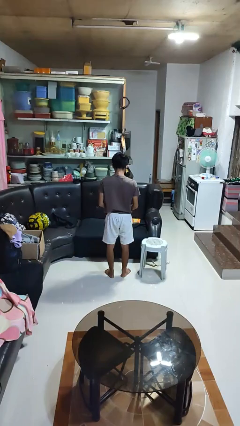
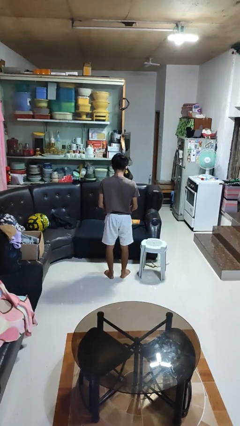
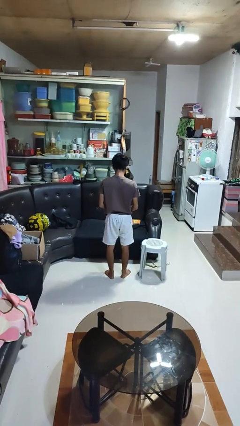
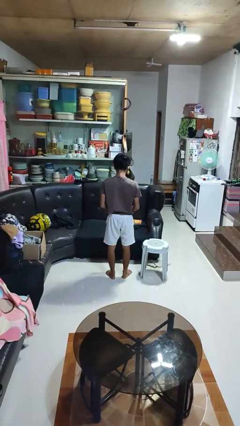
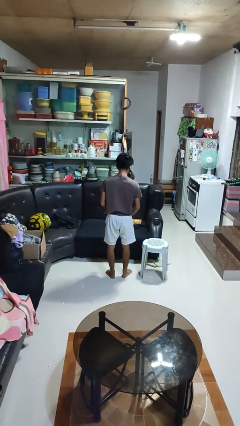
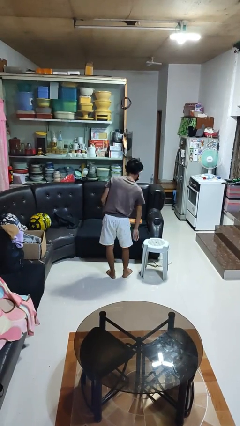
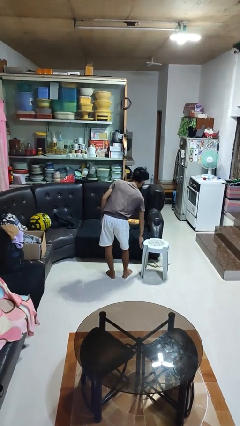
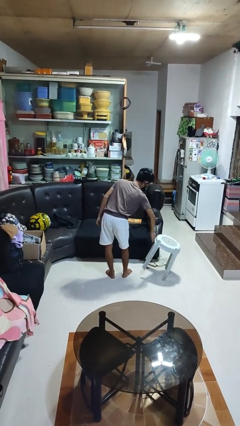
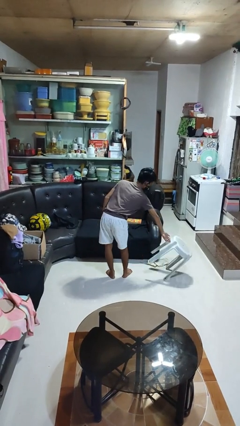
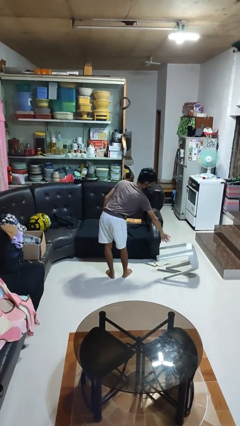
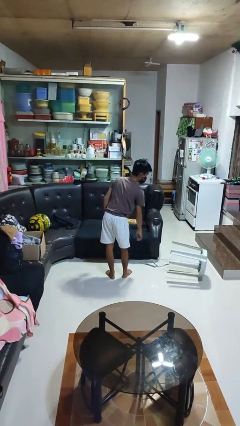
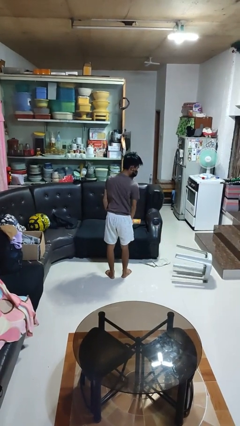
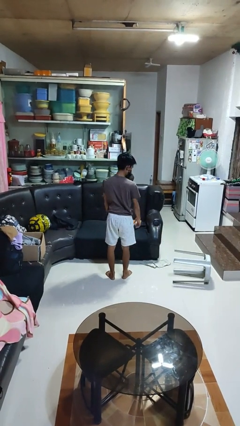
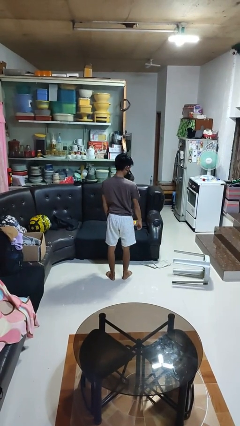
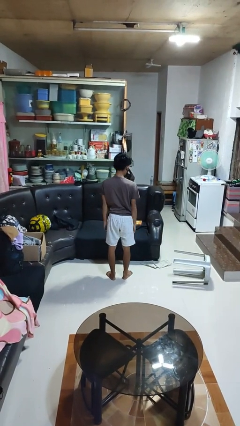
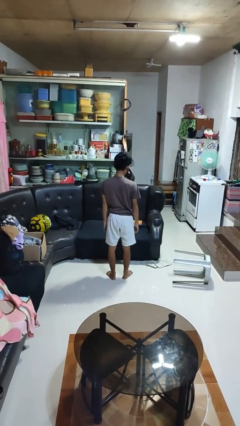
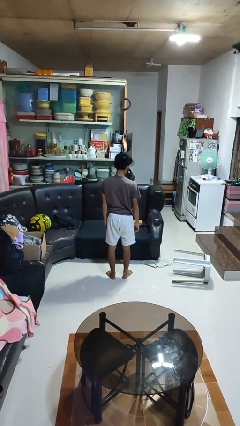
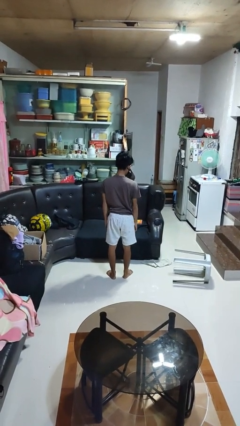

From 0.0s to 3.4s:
person knocks over furniture

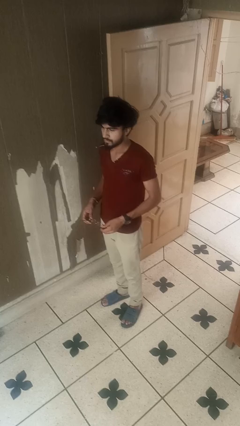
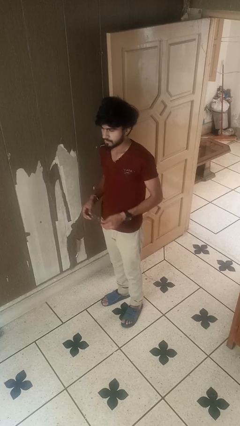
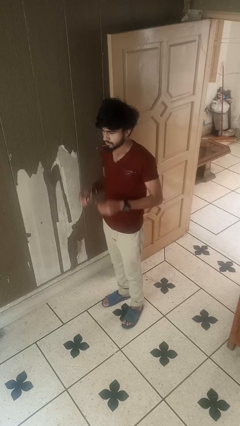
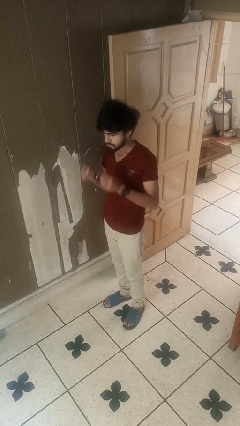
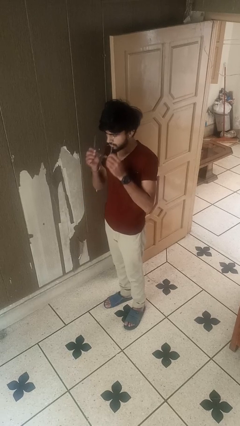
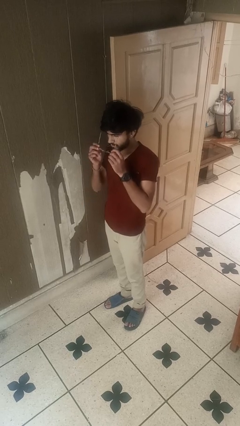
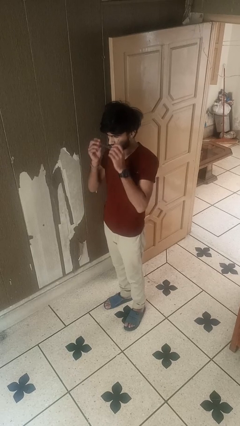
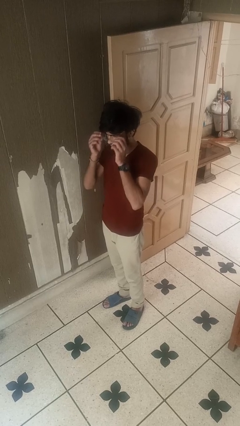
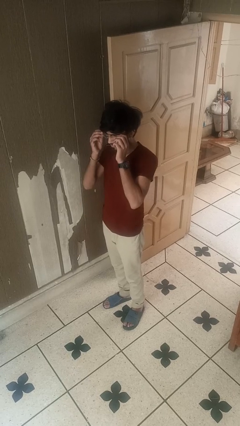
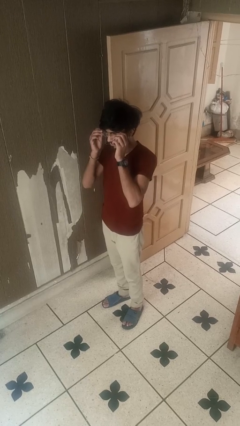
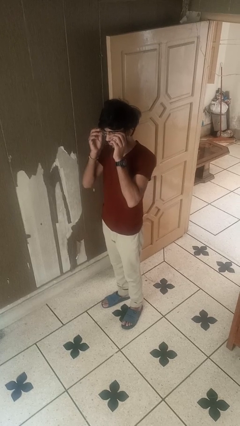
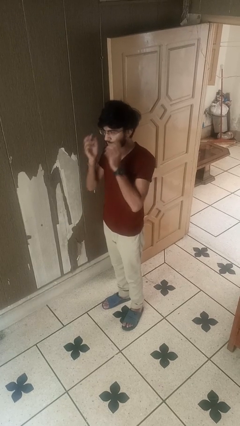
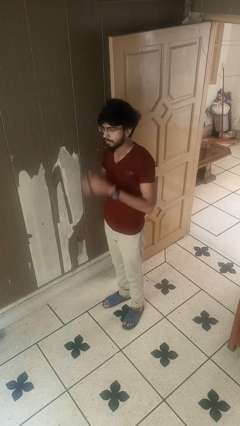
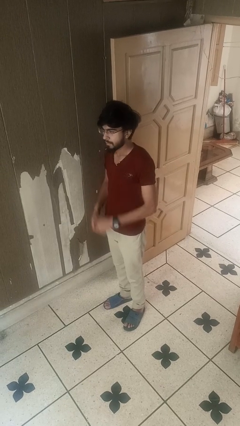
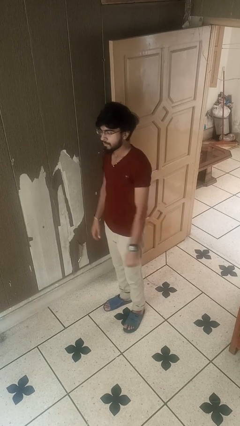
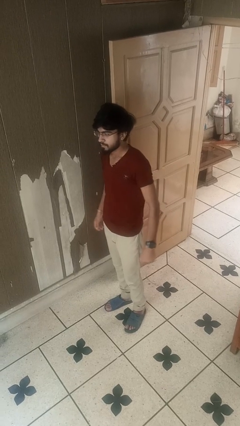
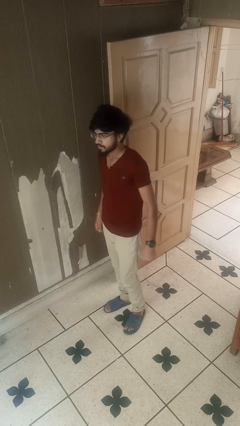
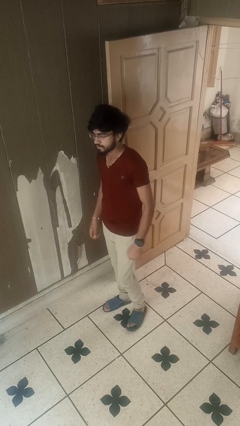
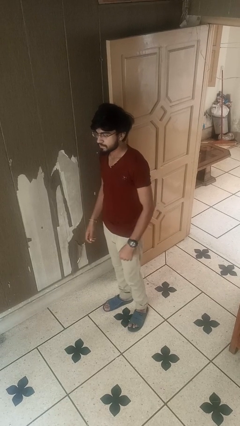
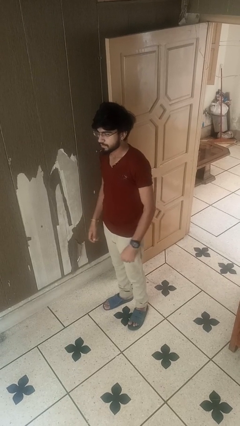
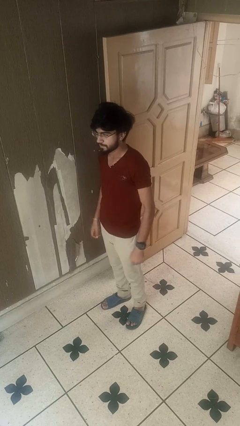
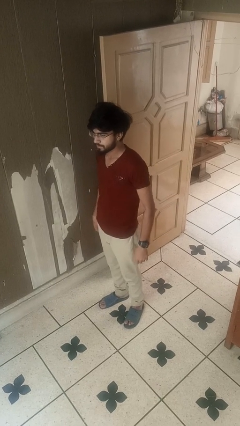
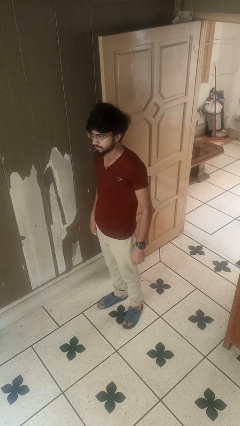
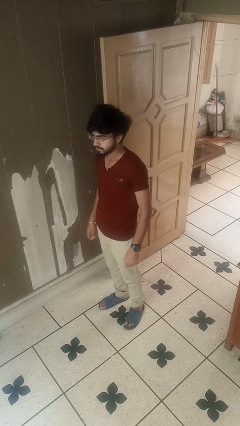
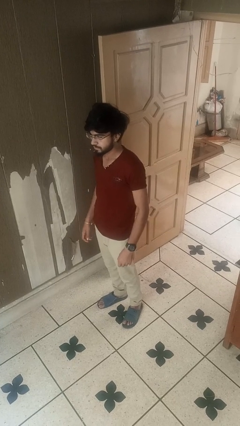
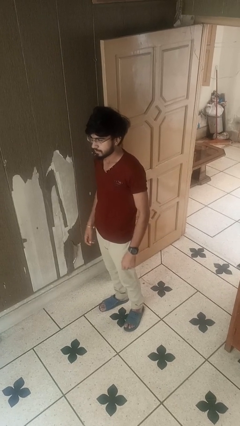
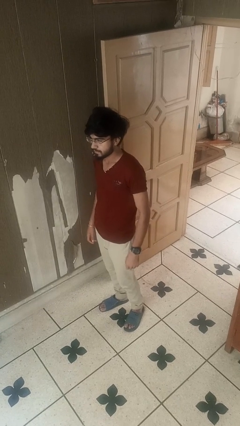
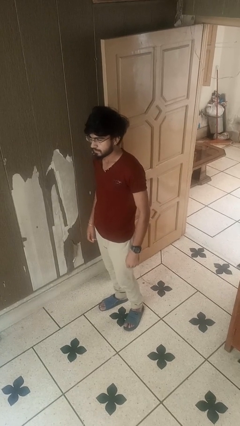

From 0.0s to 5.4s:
person puts on glasses

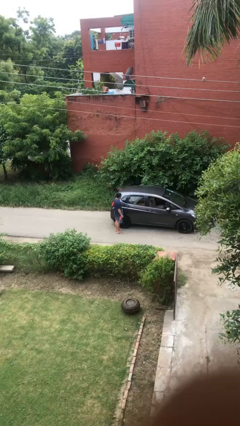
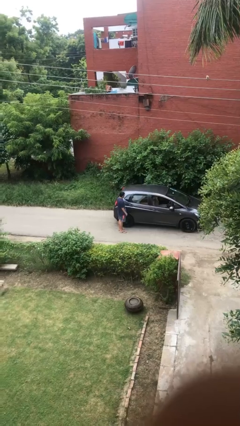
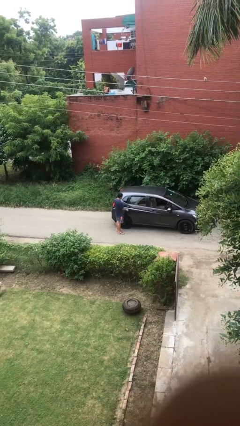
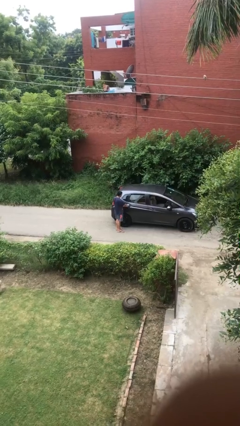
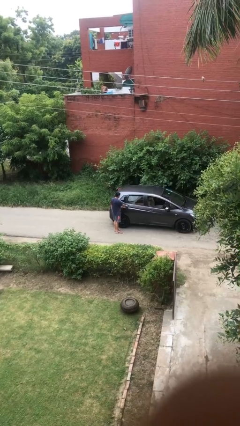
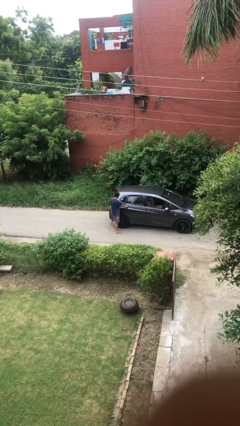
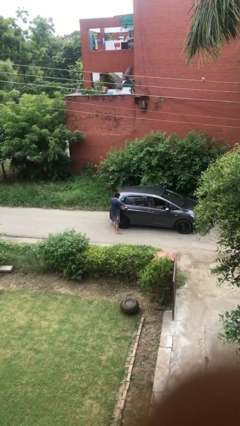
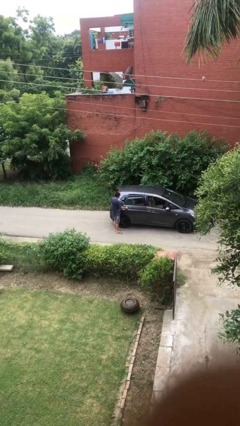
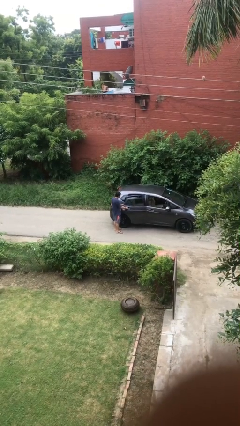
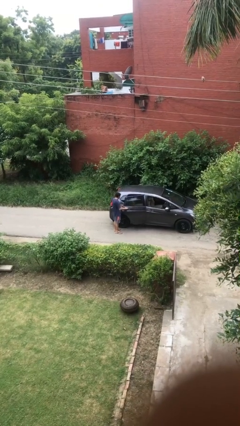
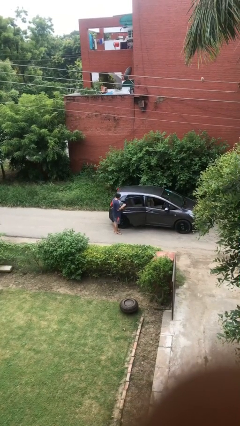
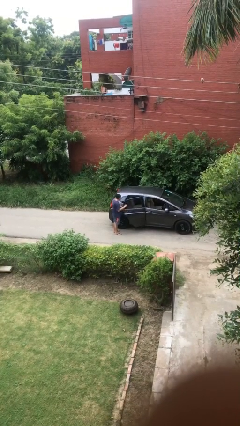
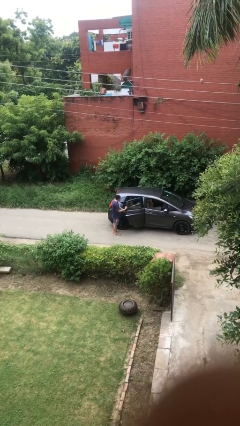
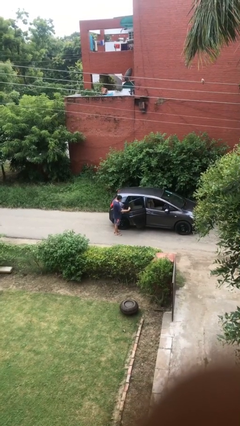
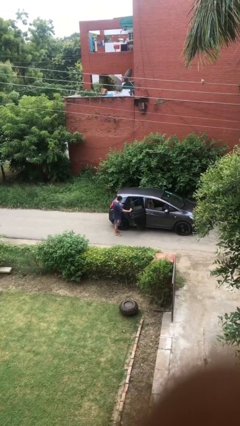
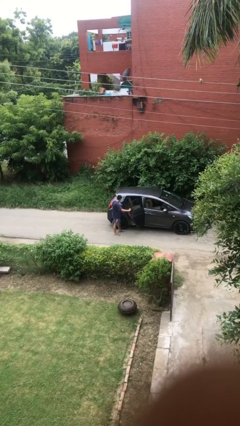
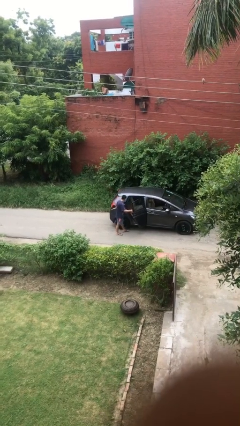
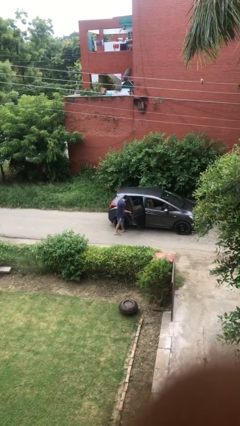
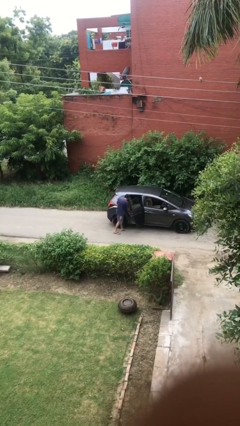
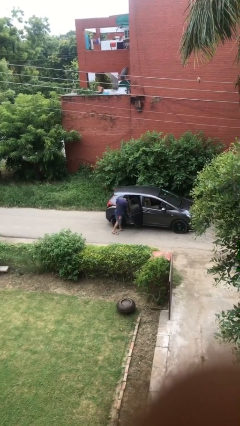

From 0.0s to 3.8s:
person opens car door

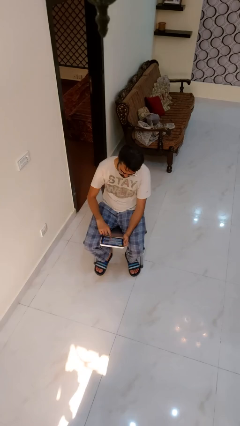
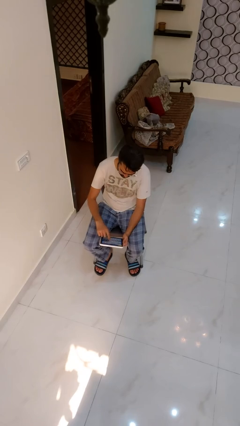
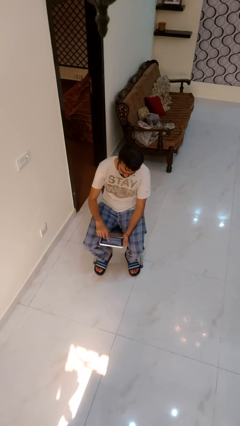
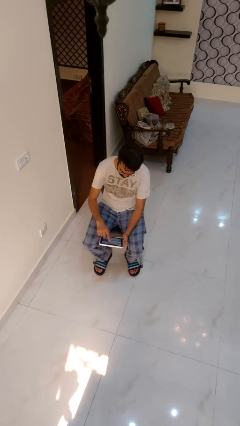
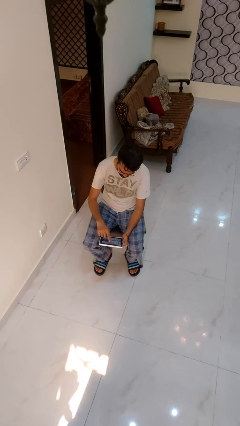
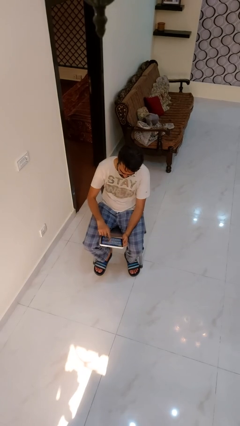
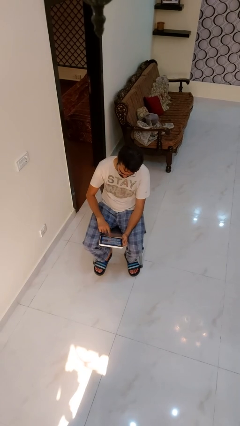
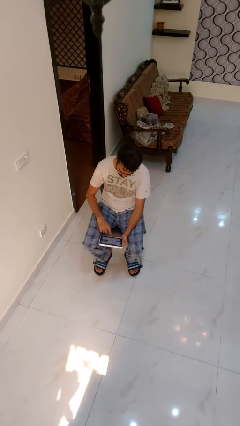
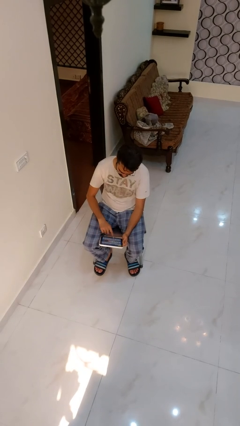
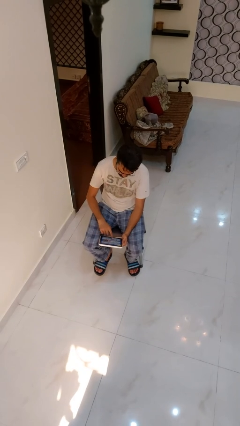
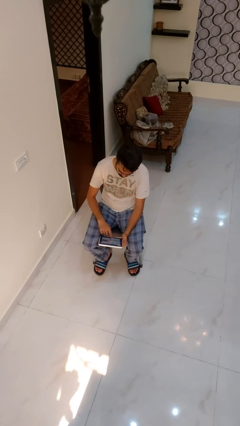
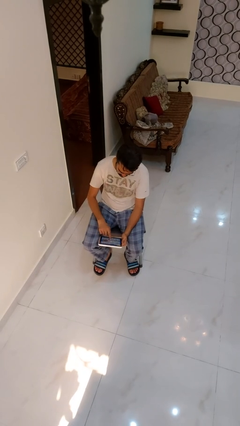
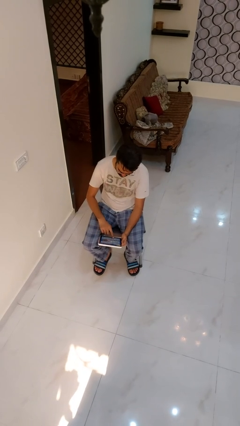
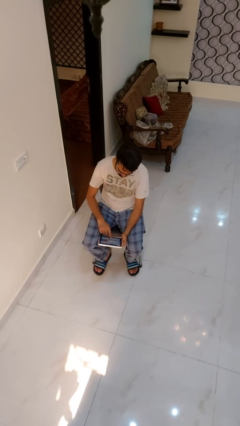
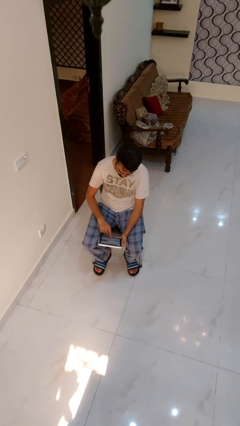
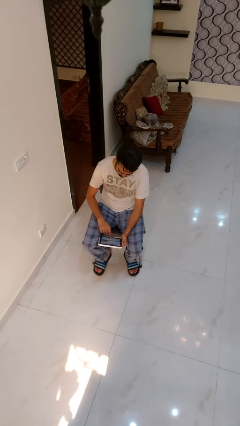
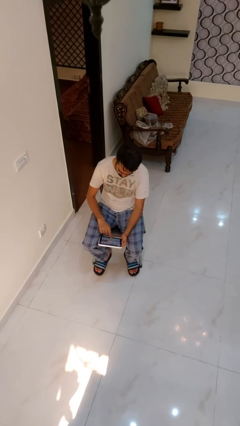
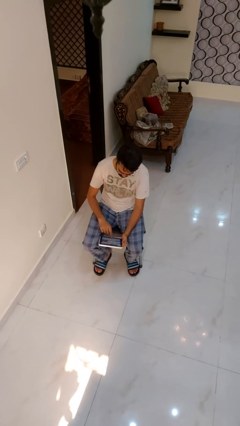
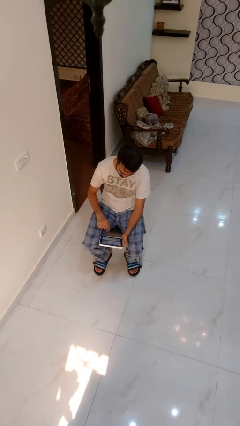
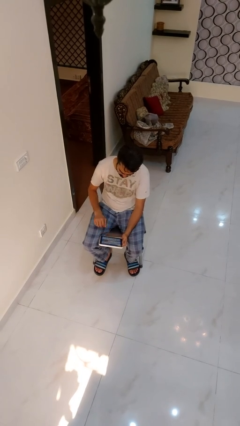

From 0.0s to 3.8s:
person interacts with tablet

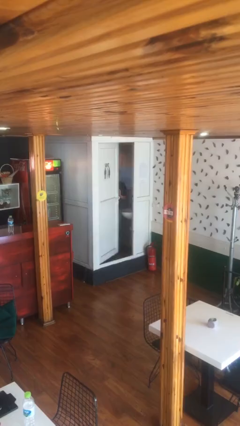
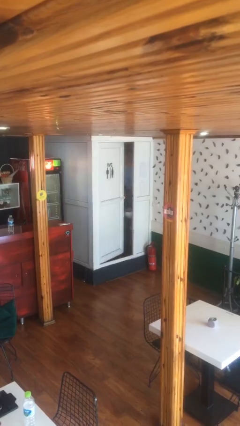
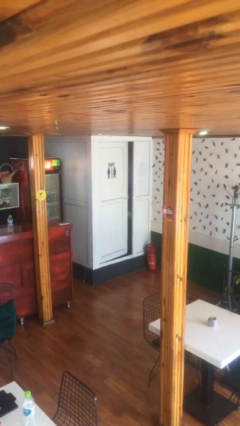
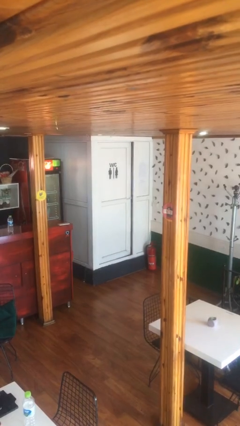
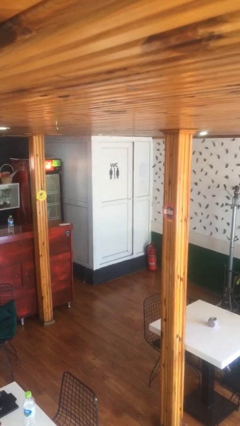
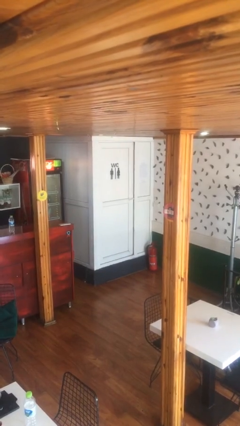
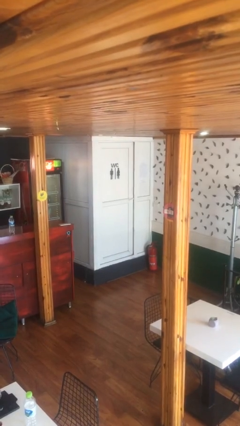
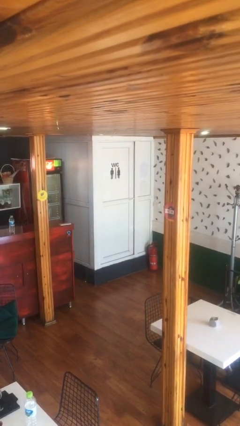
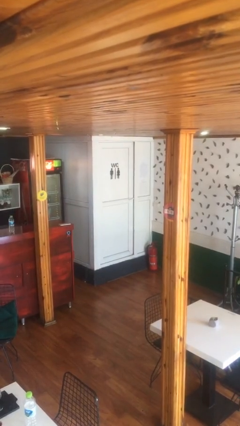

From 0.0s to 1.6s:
person closes facility door
